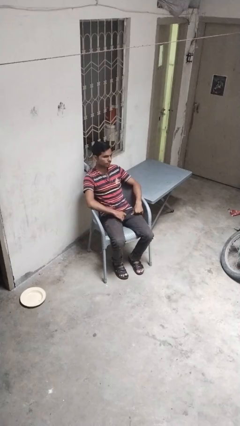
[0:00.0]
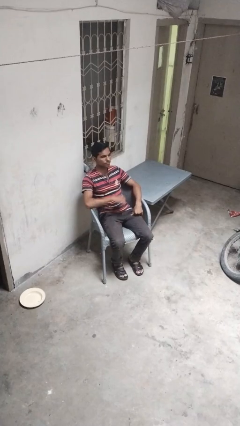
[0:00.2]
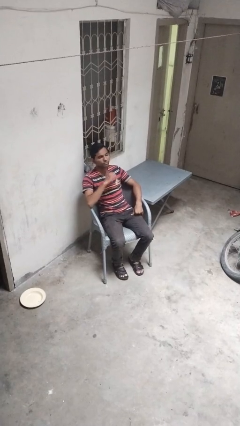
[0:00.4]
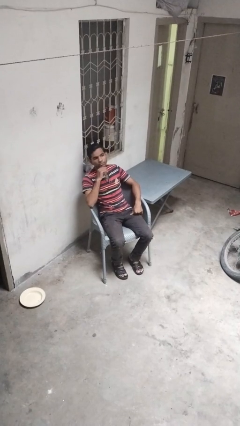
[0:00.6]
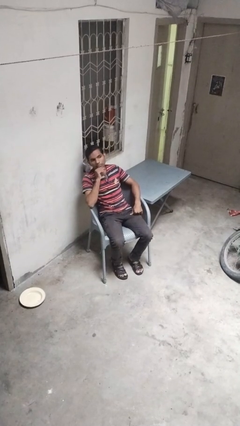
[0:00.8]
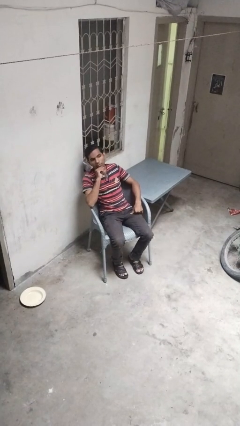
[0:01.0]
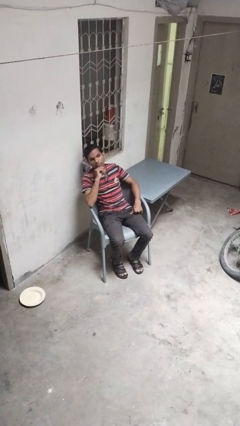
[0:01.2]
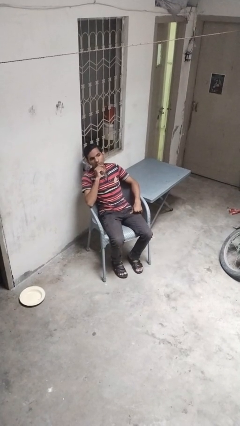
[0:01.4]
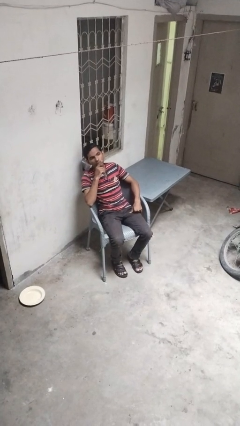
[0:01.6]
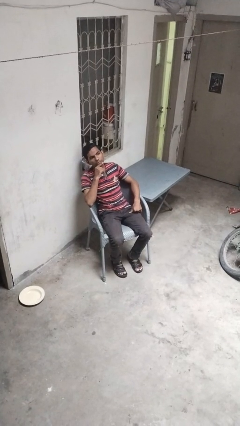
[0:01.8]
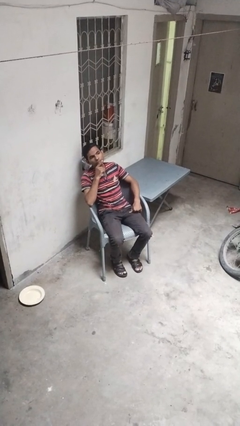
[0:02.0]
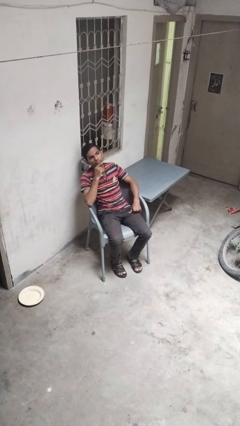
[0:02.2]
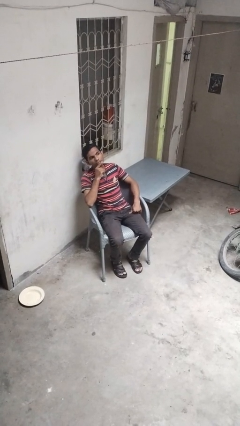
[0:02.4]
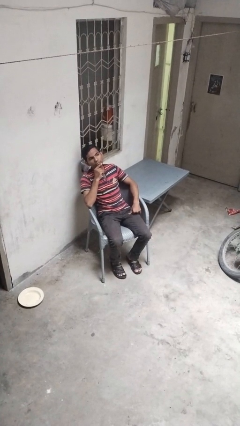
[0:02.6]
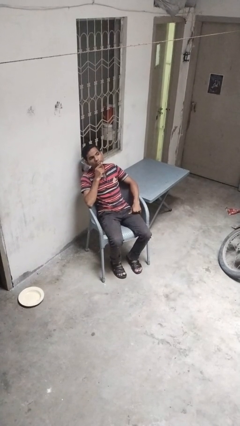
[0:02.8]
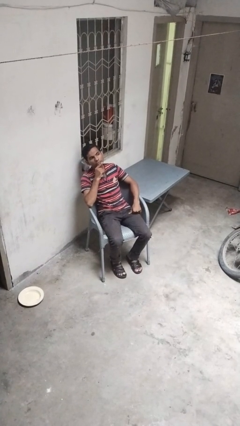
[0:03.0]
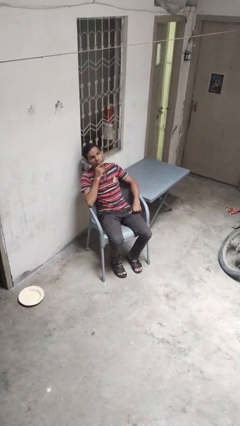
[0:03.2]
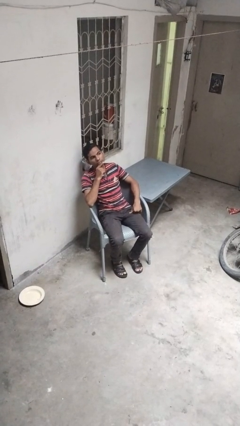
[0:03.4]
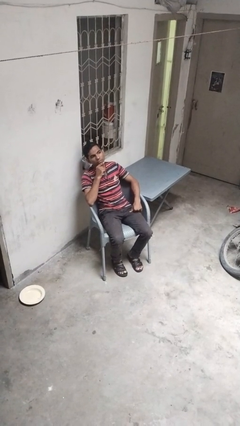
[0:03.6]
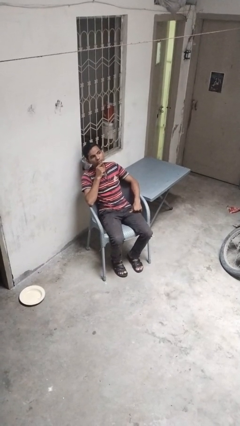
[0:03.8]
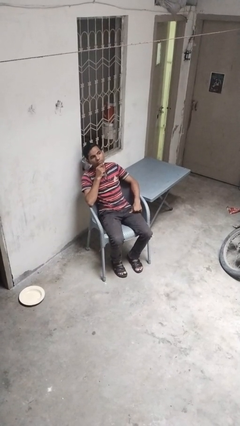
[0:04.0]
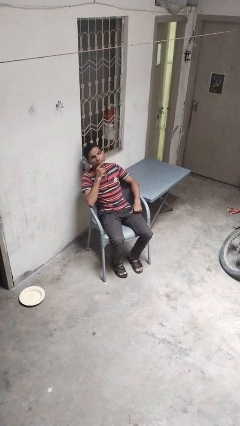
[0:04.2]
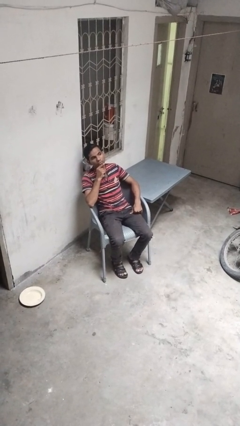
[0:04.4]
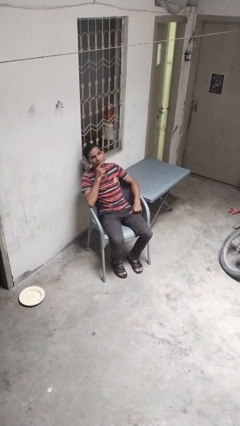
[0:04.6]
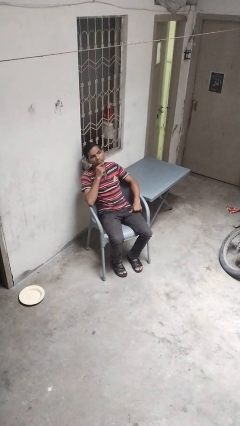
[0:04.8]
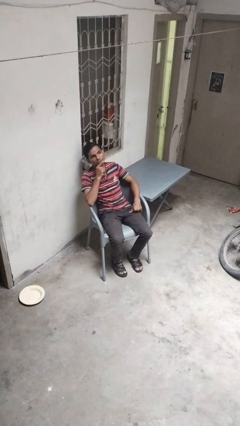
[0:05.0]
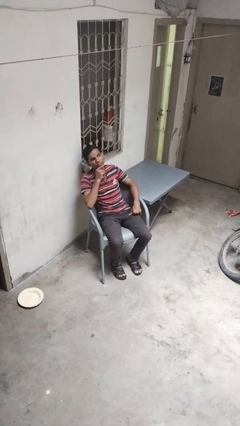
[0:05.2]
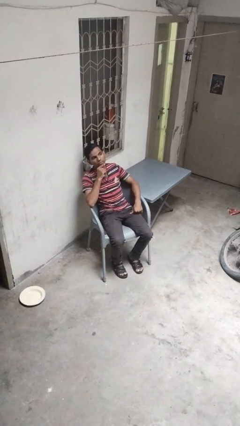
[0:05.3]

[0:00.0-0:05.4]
person strokes chin

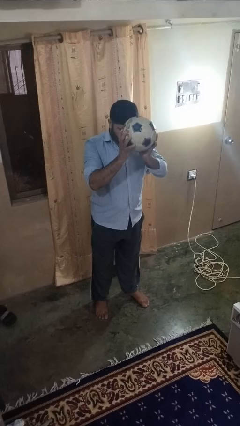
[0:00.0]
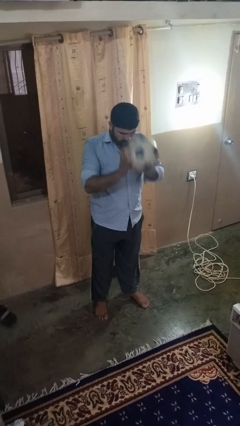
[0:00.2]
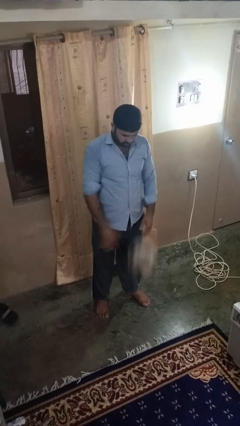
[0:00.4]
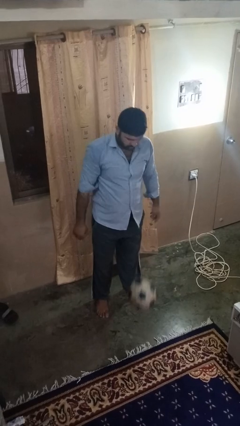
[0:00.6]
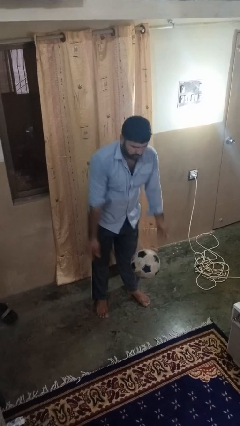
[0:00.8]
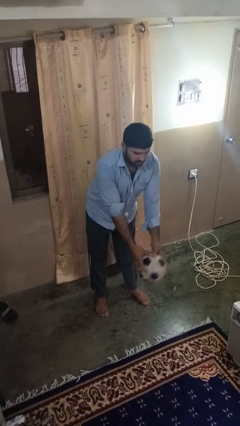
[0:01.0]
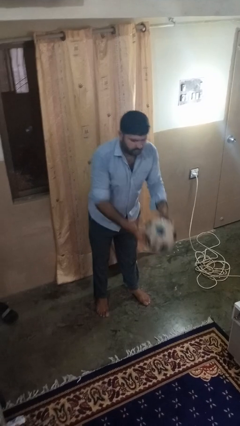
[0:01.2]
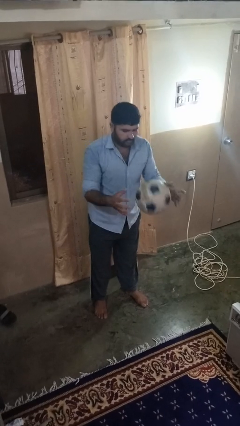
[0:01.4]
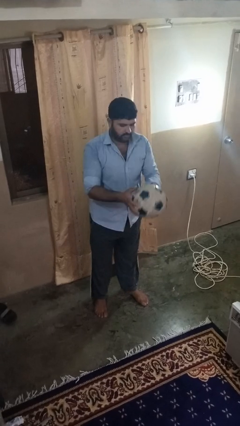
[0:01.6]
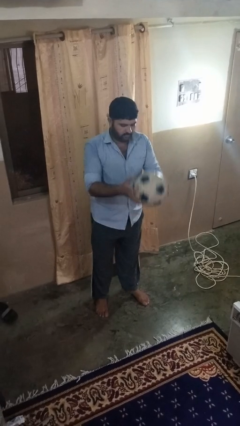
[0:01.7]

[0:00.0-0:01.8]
person bounces ball on floor

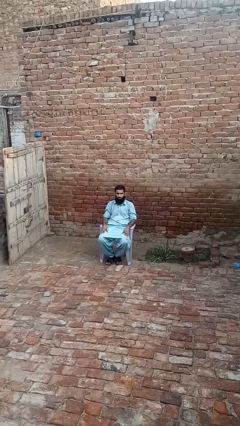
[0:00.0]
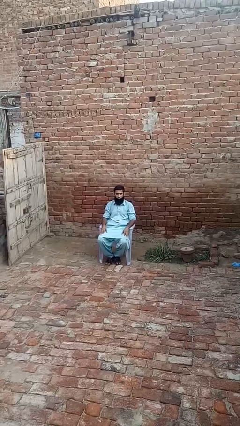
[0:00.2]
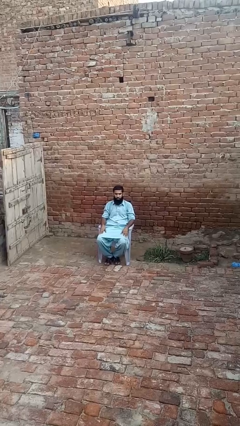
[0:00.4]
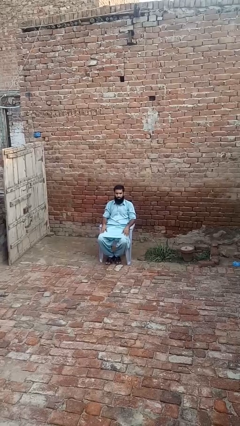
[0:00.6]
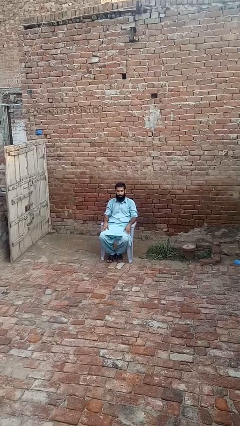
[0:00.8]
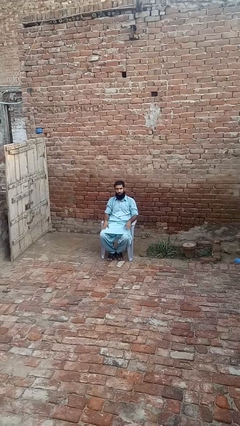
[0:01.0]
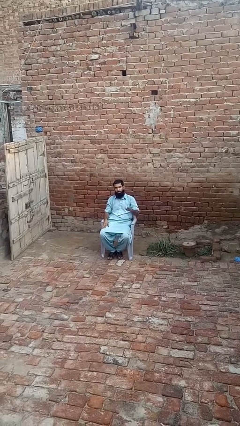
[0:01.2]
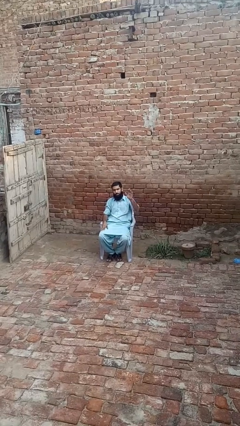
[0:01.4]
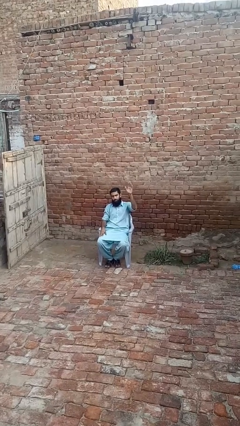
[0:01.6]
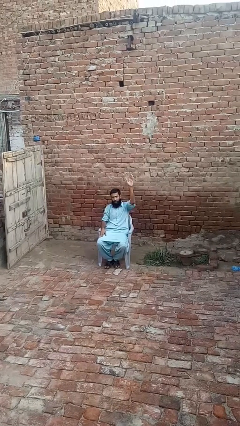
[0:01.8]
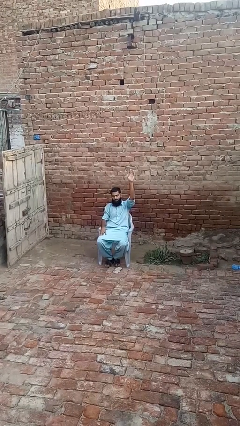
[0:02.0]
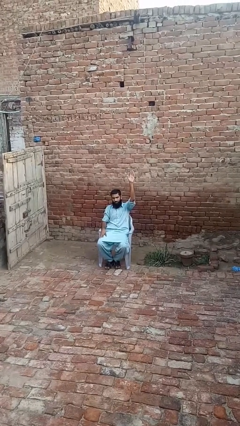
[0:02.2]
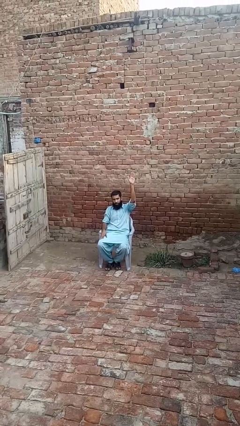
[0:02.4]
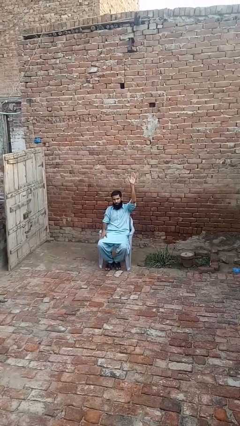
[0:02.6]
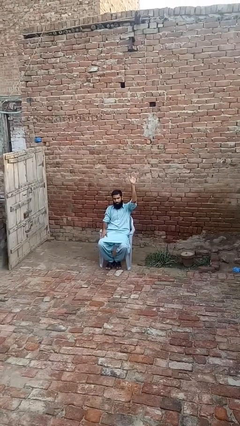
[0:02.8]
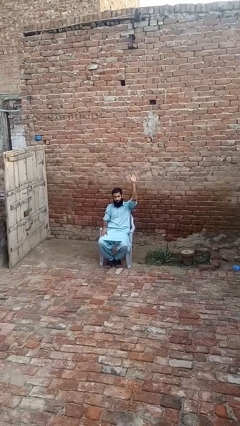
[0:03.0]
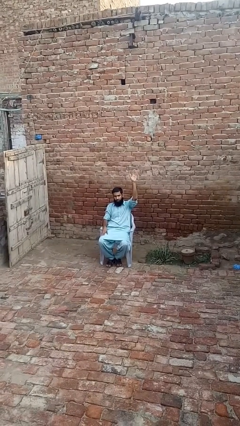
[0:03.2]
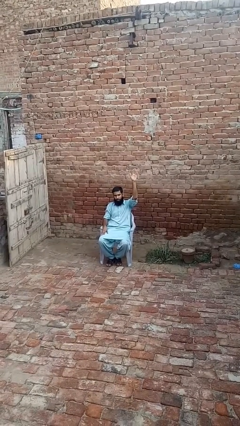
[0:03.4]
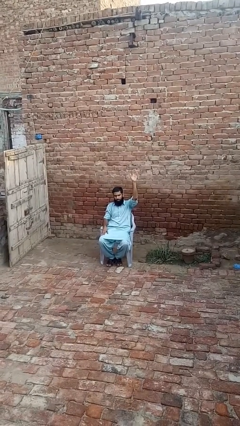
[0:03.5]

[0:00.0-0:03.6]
person gestures raise hand

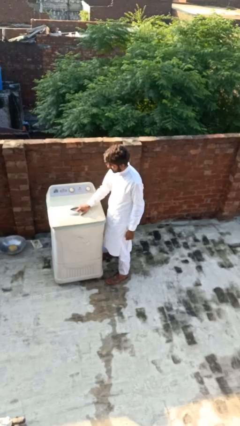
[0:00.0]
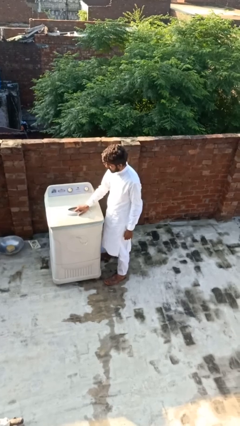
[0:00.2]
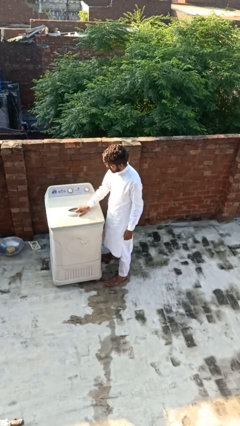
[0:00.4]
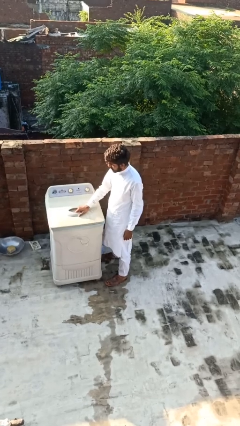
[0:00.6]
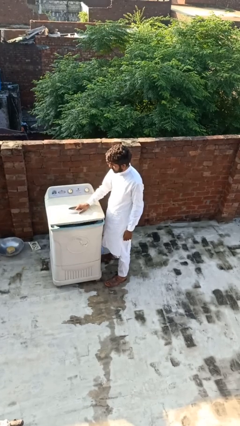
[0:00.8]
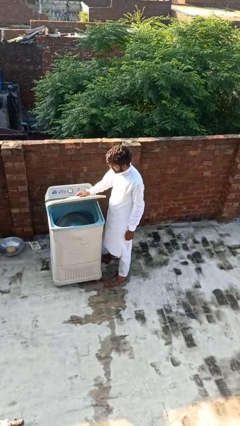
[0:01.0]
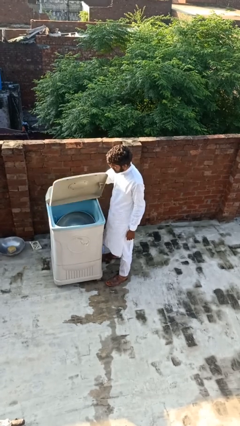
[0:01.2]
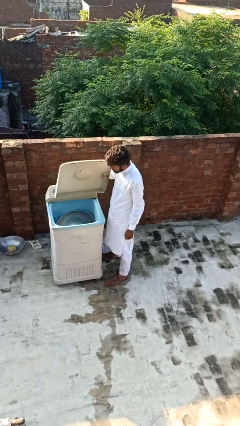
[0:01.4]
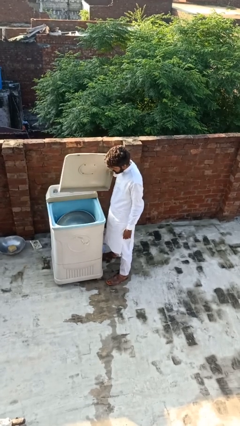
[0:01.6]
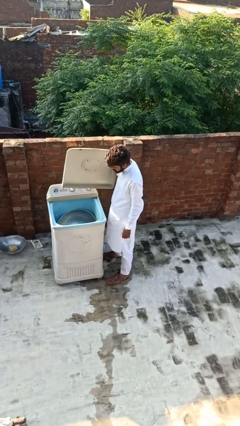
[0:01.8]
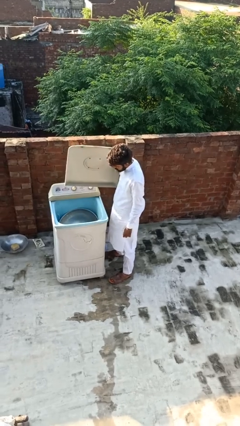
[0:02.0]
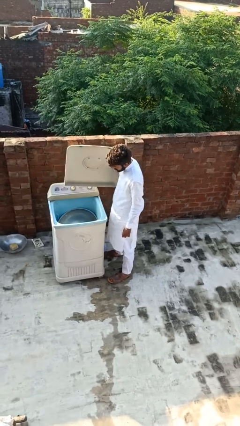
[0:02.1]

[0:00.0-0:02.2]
person opens clothes washer

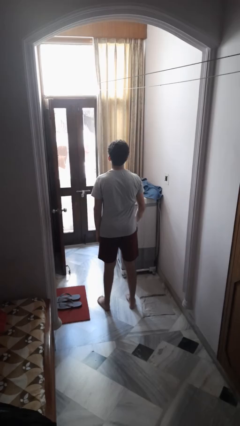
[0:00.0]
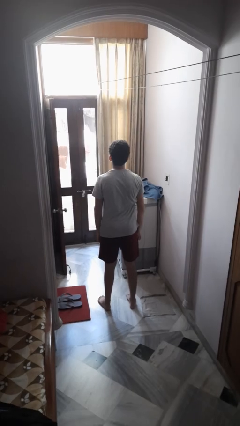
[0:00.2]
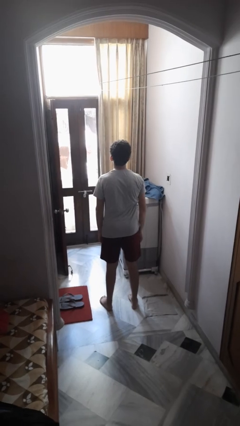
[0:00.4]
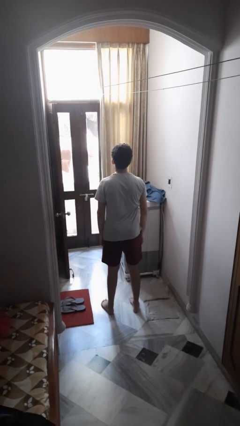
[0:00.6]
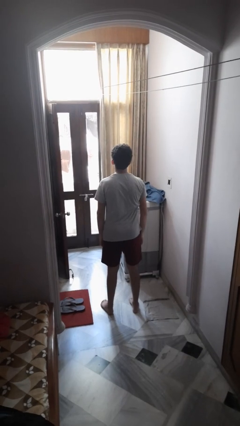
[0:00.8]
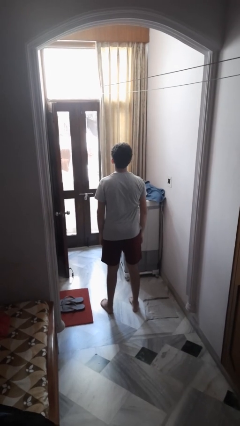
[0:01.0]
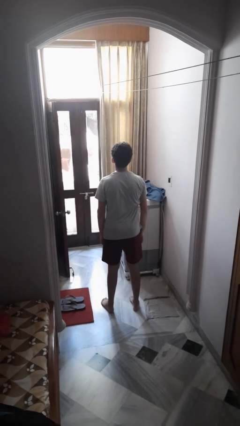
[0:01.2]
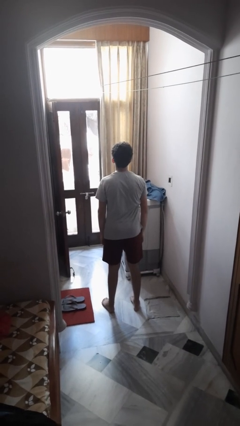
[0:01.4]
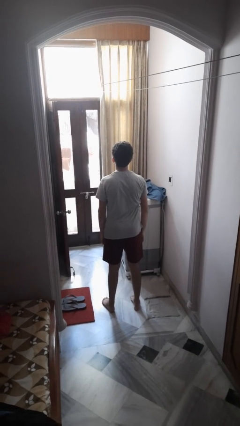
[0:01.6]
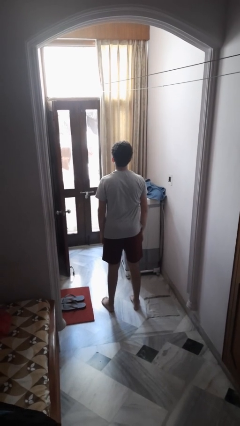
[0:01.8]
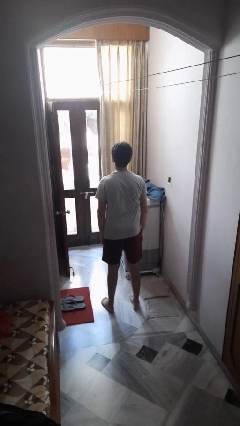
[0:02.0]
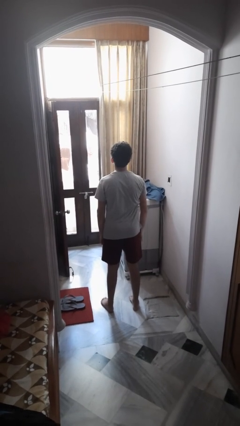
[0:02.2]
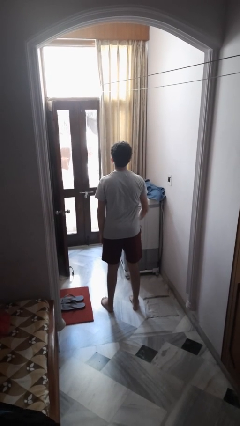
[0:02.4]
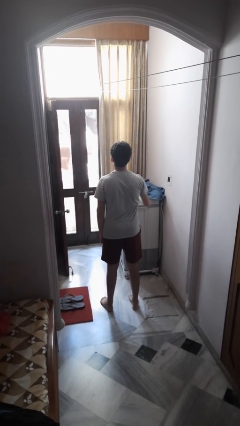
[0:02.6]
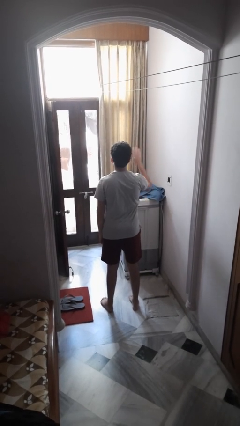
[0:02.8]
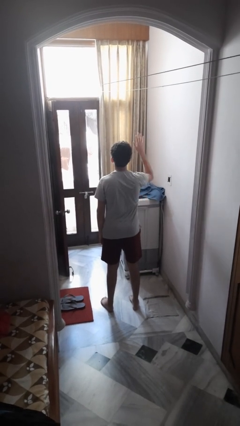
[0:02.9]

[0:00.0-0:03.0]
person gestures lower hand

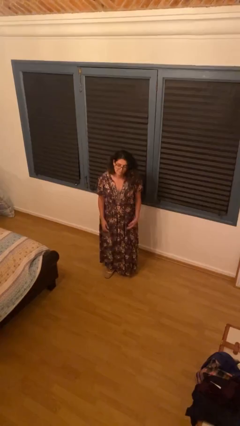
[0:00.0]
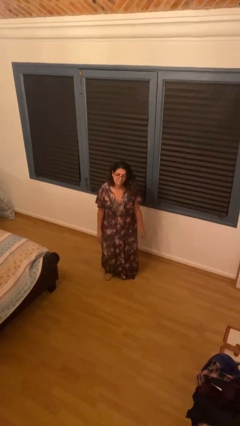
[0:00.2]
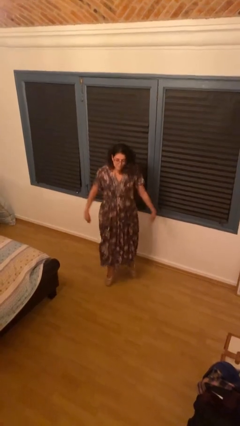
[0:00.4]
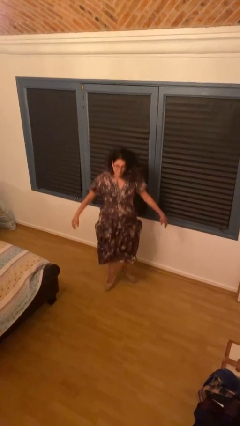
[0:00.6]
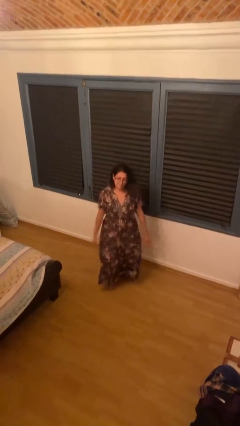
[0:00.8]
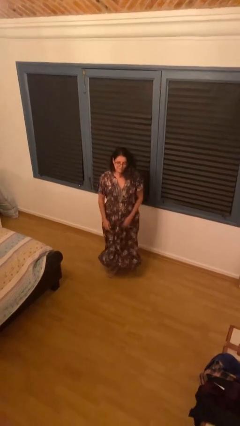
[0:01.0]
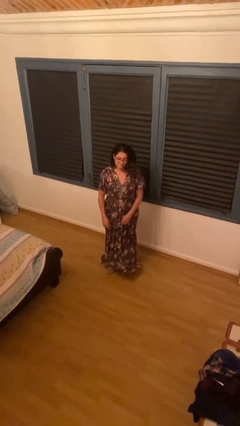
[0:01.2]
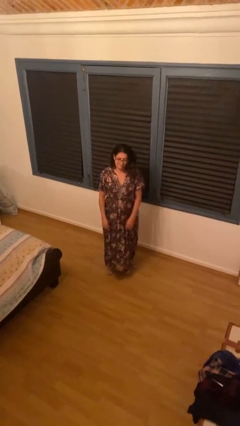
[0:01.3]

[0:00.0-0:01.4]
person jumps
